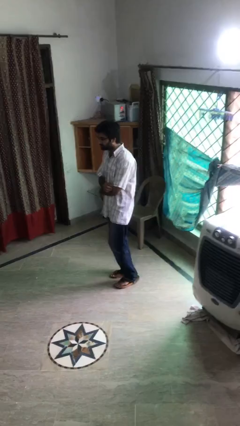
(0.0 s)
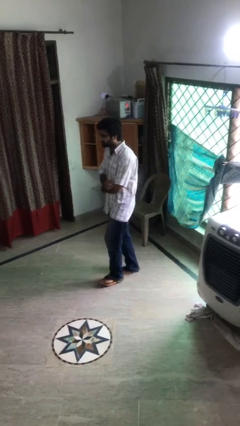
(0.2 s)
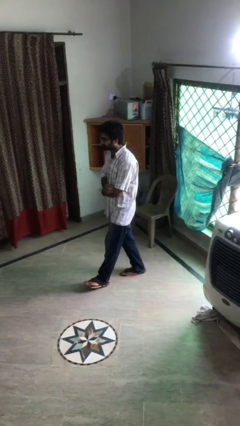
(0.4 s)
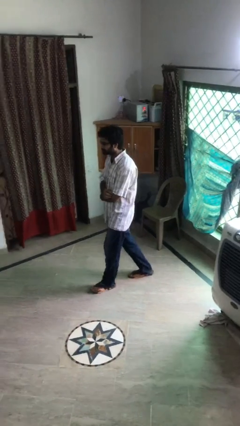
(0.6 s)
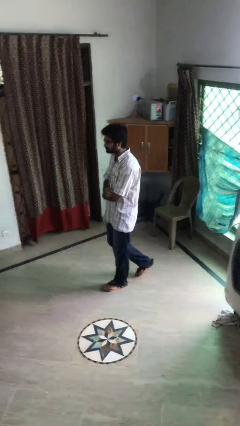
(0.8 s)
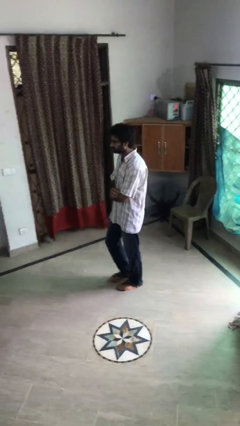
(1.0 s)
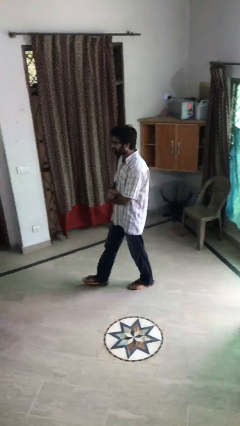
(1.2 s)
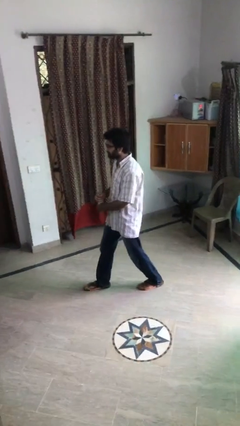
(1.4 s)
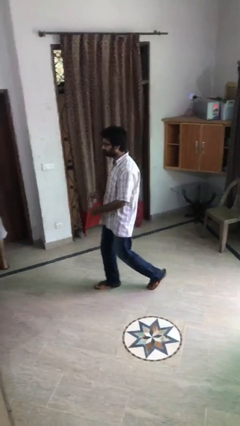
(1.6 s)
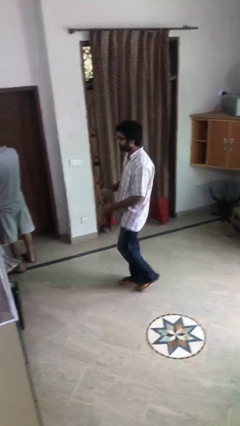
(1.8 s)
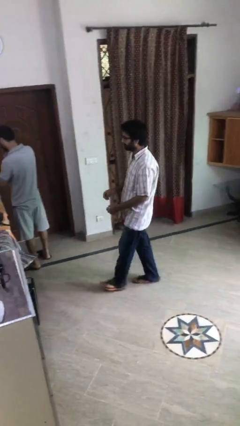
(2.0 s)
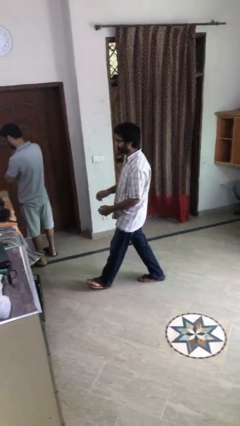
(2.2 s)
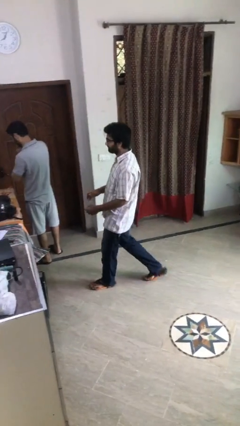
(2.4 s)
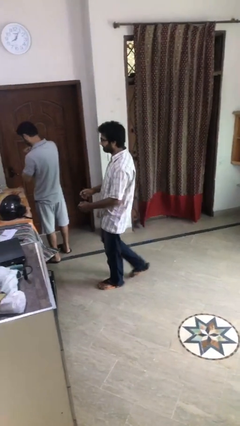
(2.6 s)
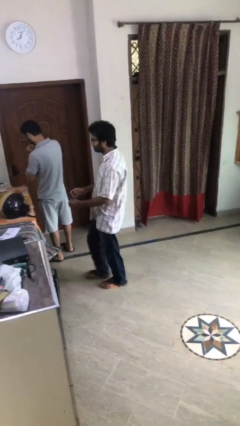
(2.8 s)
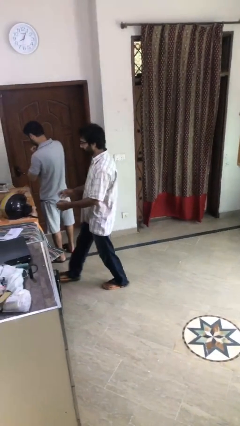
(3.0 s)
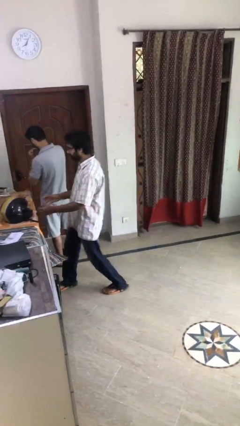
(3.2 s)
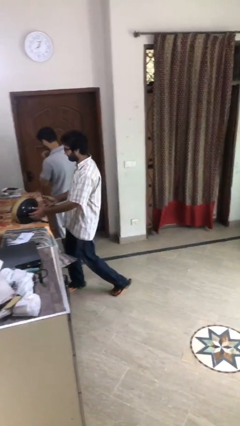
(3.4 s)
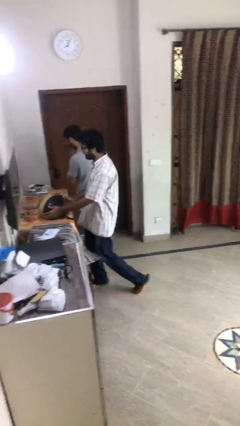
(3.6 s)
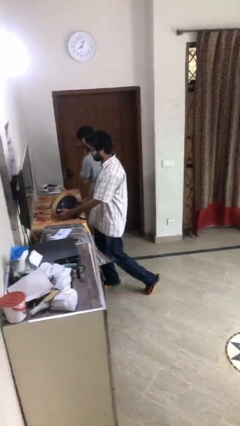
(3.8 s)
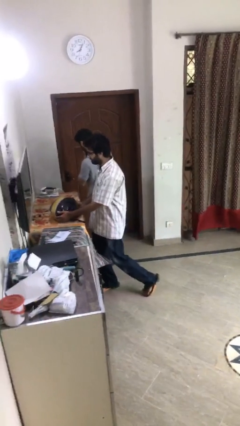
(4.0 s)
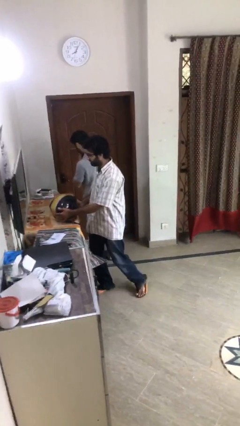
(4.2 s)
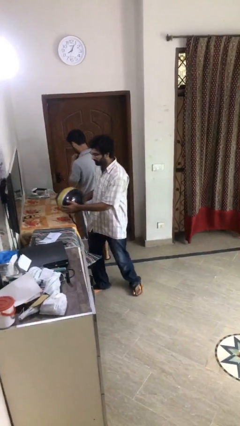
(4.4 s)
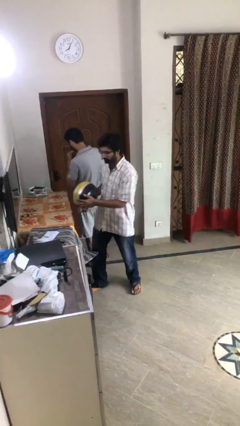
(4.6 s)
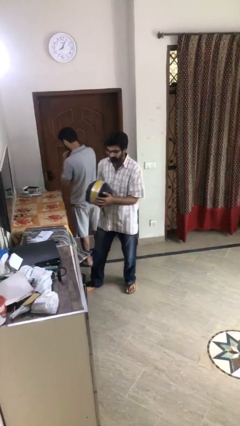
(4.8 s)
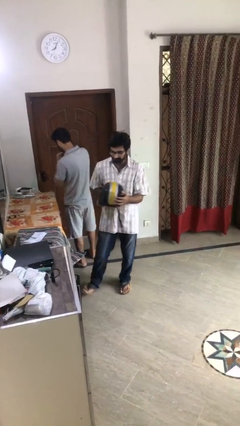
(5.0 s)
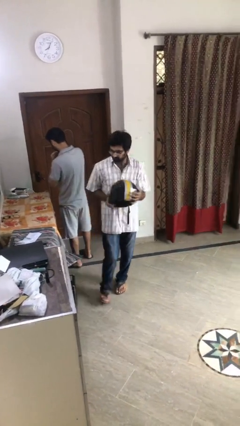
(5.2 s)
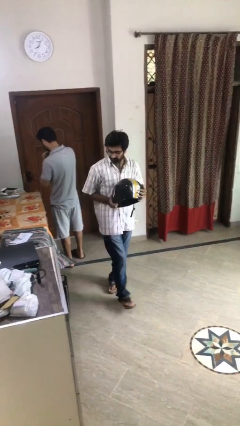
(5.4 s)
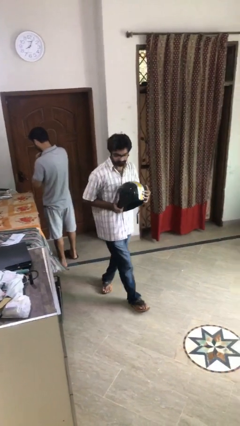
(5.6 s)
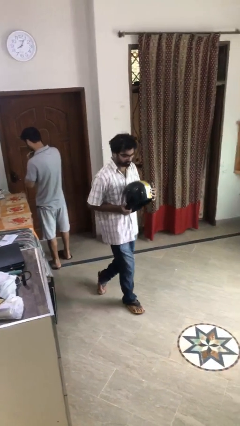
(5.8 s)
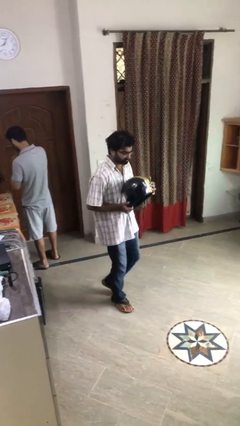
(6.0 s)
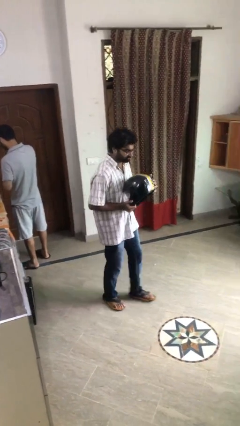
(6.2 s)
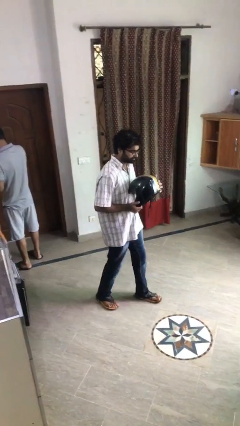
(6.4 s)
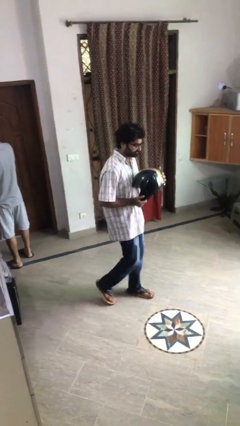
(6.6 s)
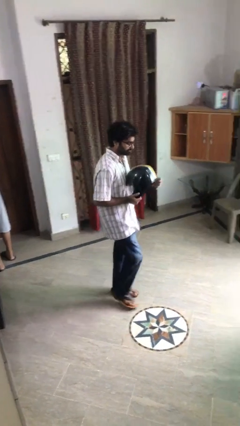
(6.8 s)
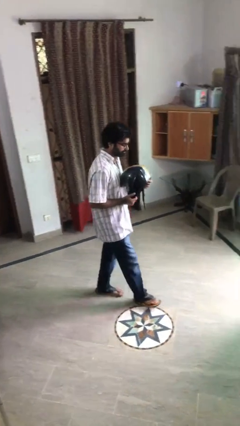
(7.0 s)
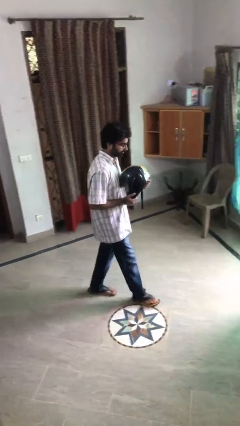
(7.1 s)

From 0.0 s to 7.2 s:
person steals object from person

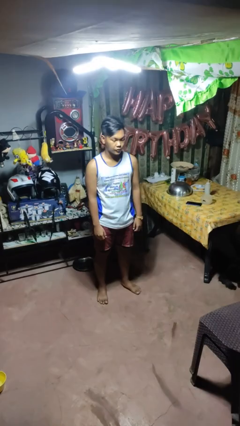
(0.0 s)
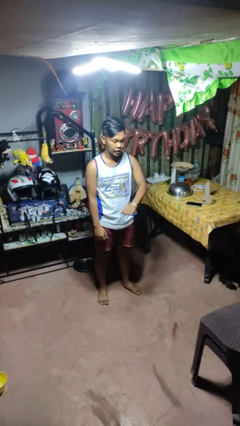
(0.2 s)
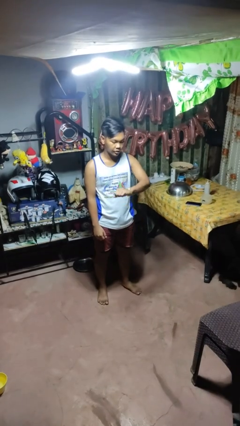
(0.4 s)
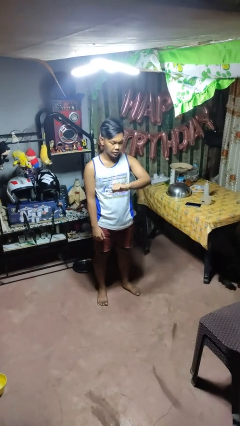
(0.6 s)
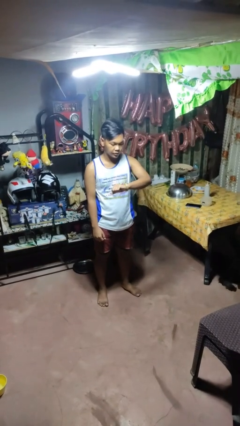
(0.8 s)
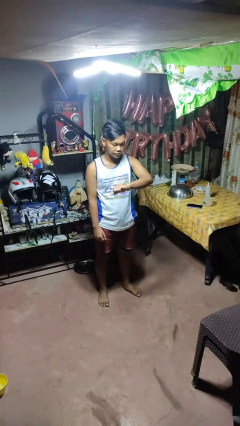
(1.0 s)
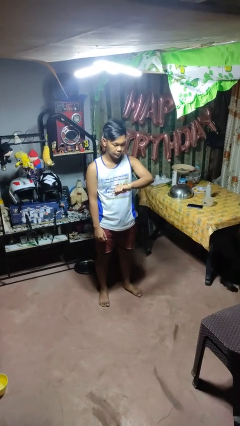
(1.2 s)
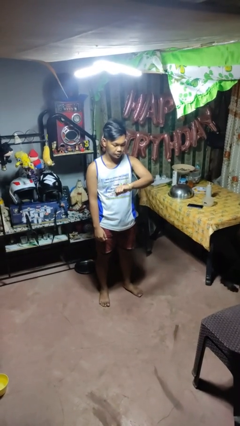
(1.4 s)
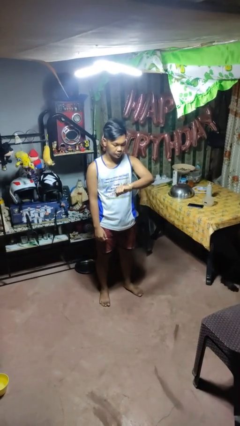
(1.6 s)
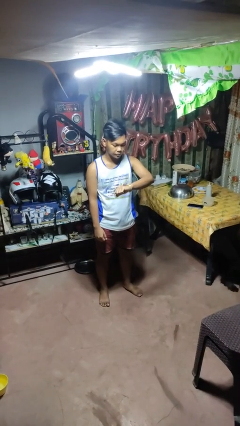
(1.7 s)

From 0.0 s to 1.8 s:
person looks at wristwatch

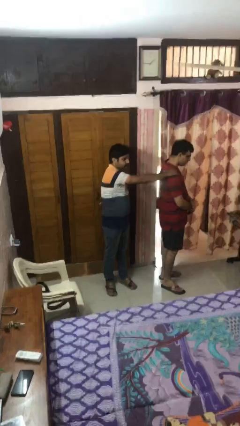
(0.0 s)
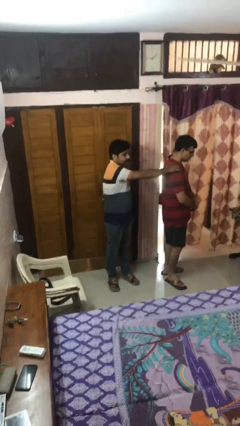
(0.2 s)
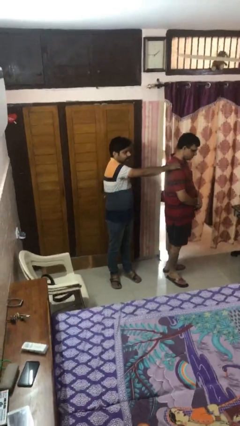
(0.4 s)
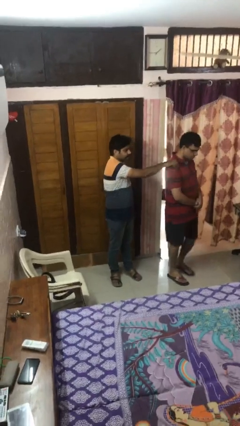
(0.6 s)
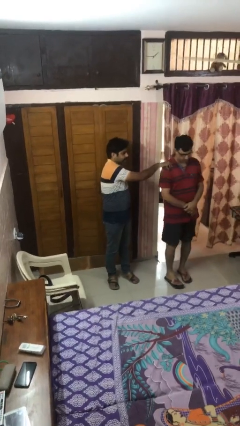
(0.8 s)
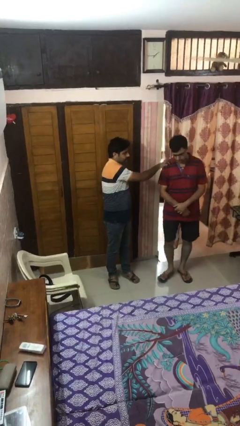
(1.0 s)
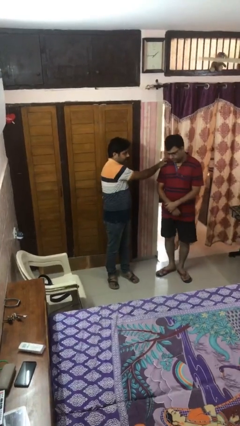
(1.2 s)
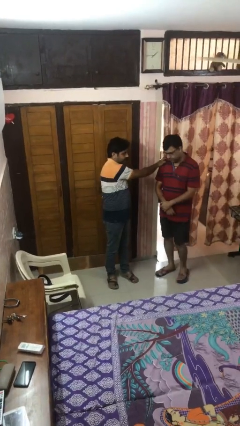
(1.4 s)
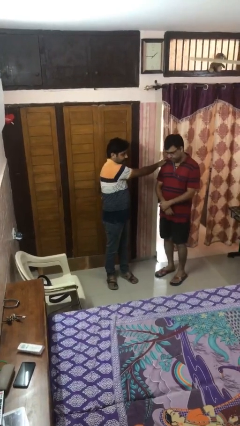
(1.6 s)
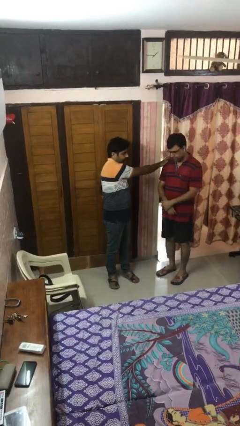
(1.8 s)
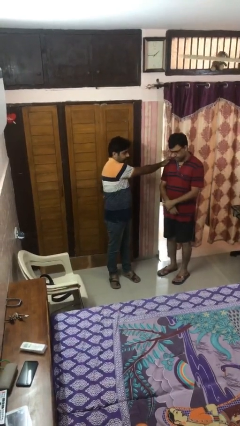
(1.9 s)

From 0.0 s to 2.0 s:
person spins person around

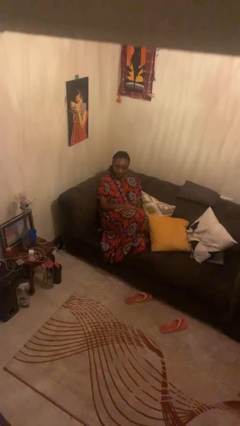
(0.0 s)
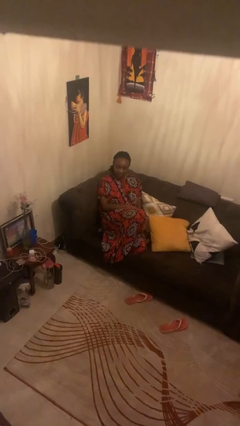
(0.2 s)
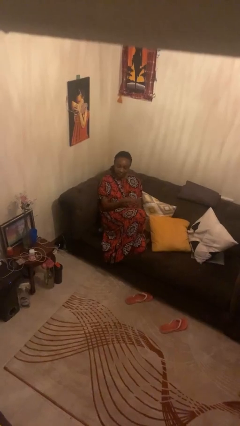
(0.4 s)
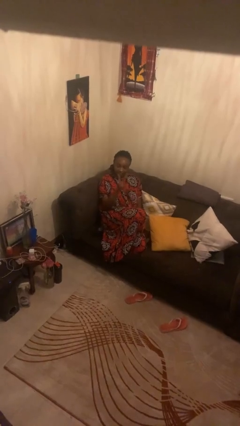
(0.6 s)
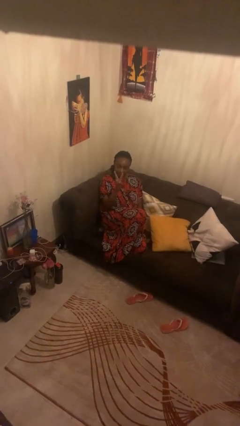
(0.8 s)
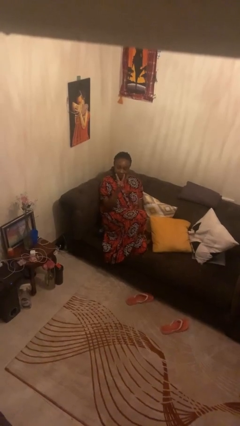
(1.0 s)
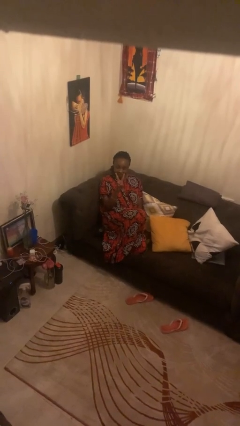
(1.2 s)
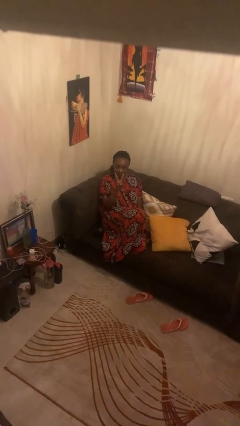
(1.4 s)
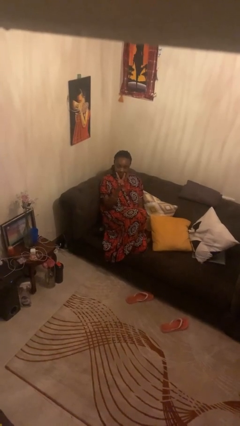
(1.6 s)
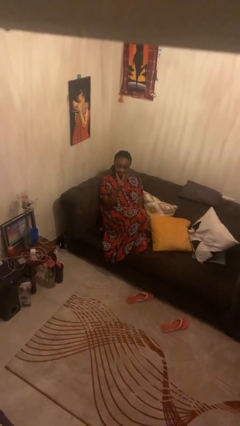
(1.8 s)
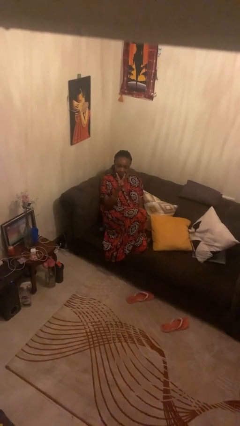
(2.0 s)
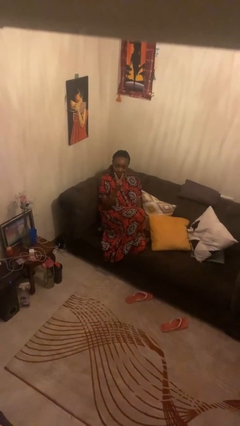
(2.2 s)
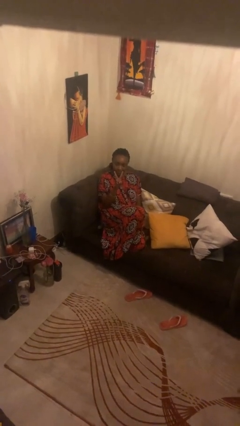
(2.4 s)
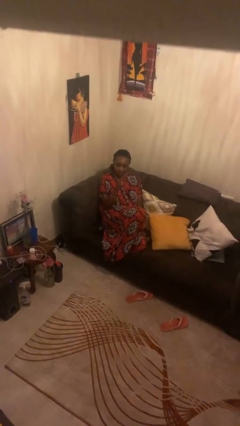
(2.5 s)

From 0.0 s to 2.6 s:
person gestures peace

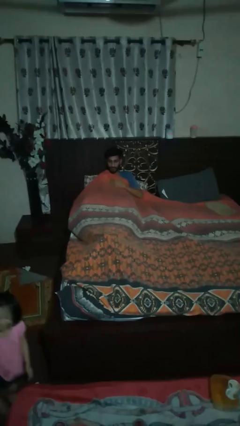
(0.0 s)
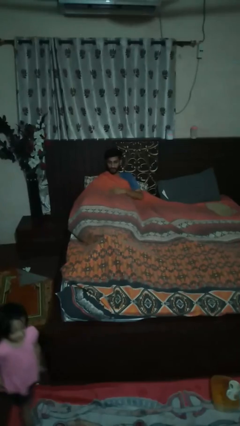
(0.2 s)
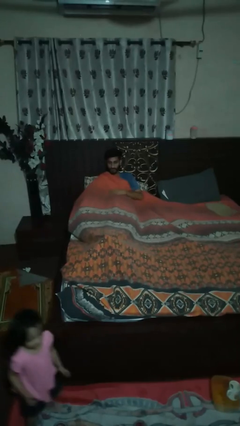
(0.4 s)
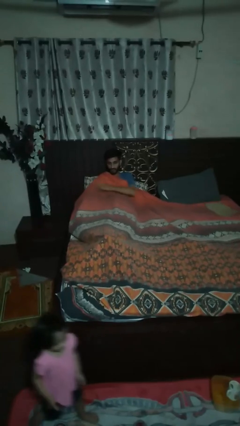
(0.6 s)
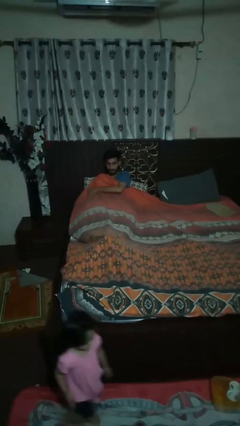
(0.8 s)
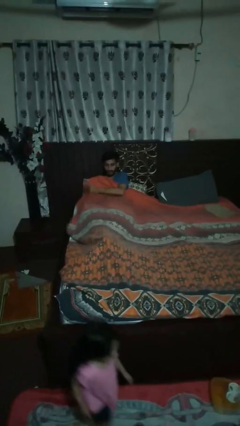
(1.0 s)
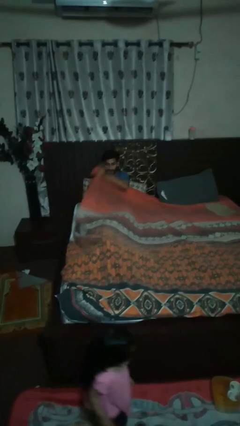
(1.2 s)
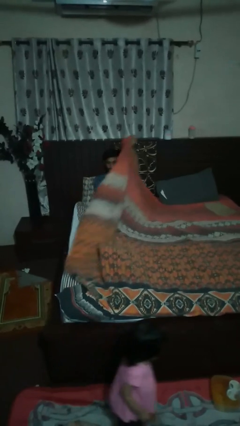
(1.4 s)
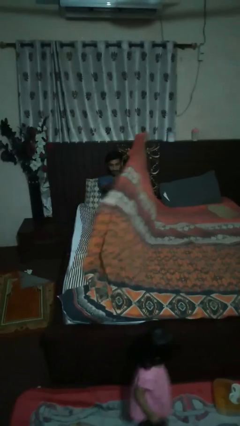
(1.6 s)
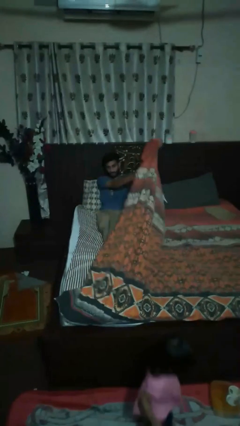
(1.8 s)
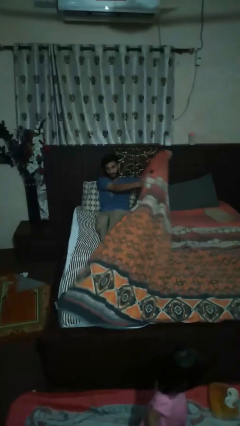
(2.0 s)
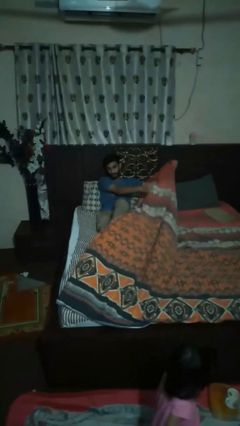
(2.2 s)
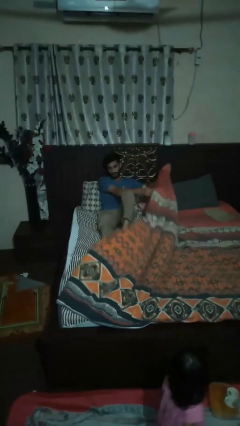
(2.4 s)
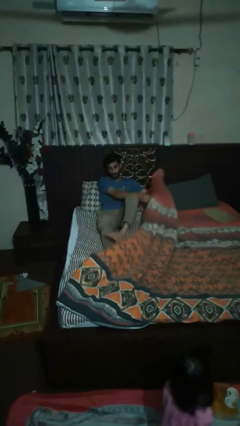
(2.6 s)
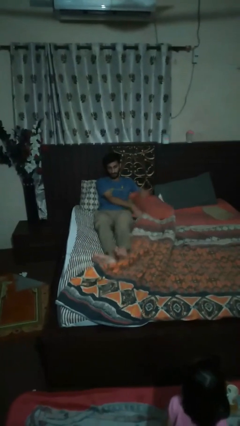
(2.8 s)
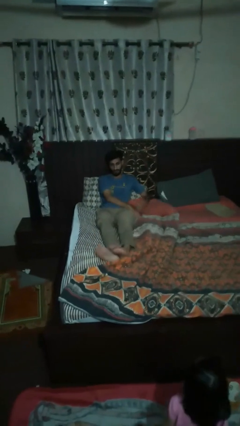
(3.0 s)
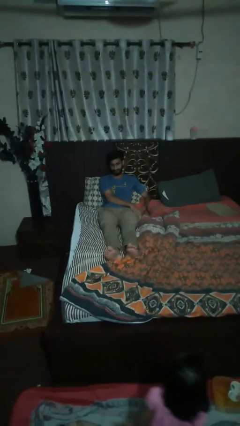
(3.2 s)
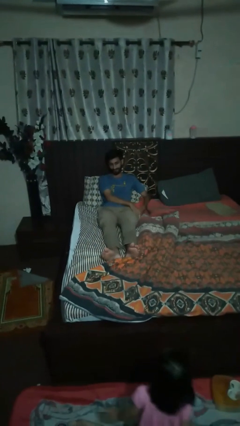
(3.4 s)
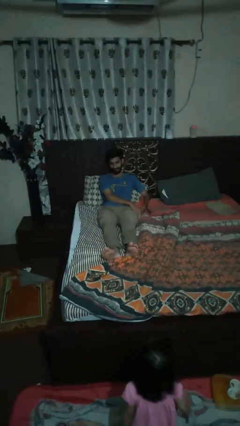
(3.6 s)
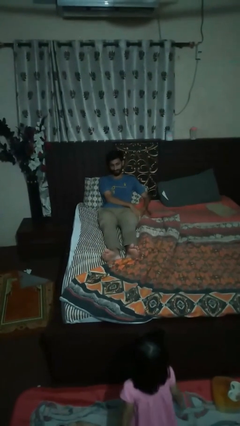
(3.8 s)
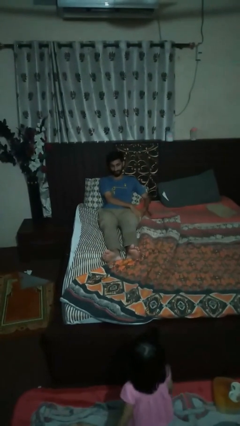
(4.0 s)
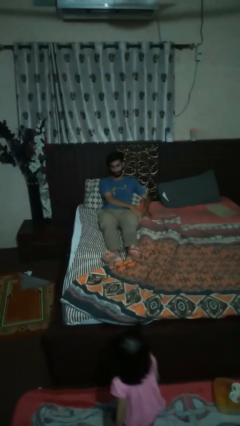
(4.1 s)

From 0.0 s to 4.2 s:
person uncovers with bedsheets
